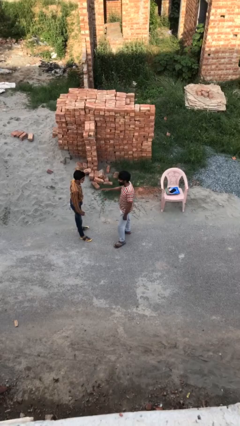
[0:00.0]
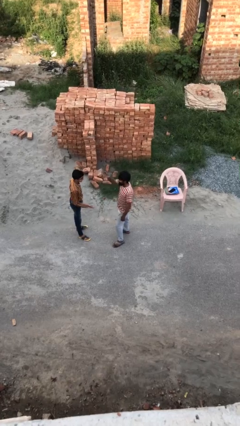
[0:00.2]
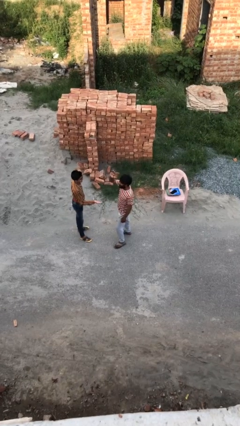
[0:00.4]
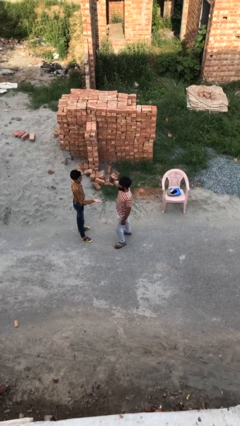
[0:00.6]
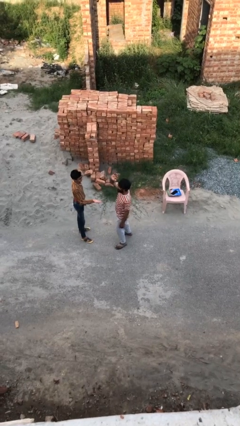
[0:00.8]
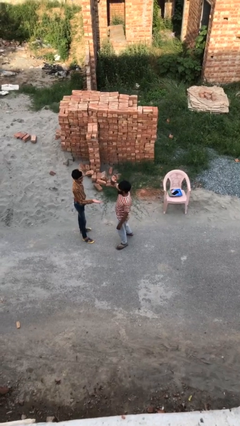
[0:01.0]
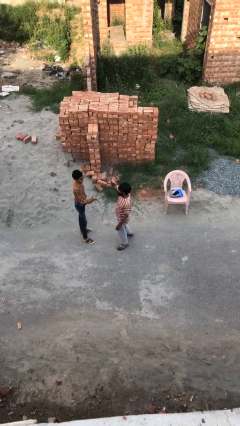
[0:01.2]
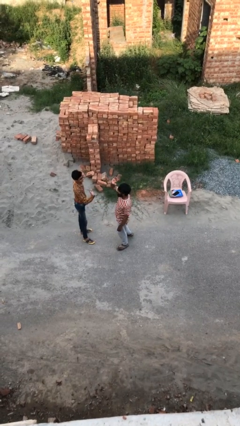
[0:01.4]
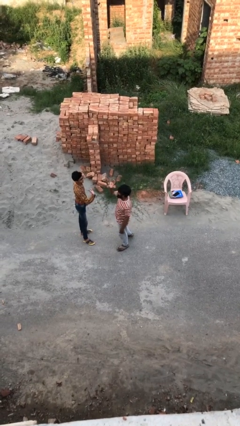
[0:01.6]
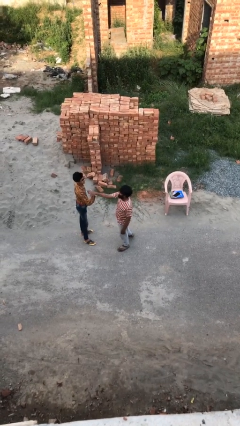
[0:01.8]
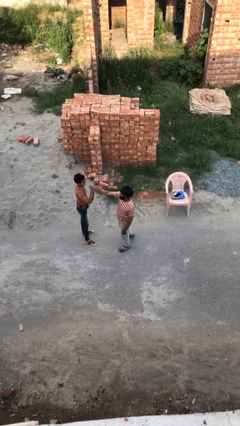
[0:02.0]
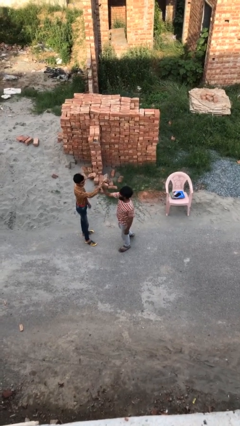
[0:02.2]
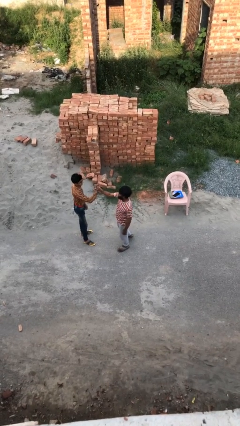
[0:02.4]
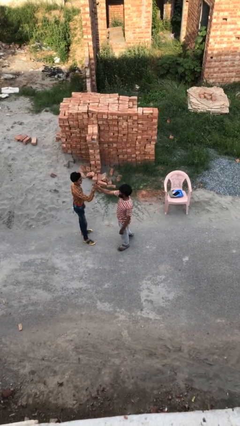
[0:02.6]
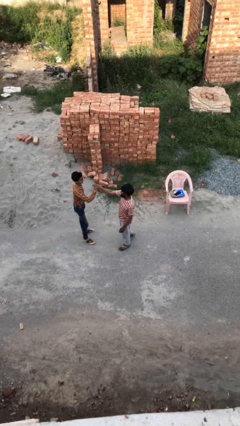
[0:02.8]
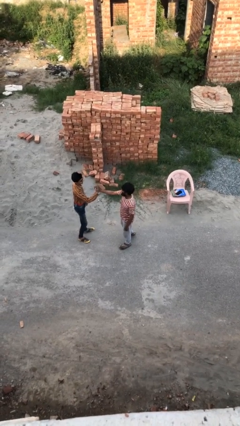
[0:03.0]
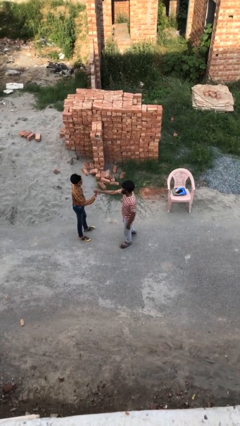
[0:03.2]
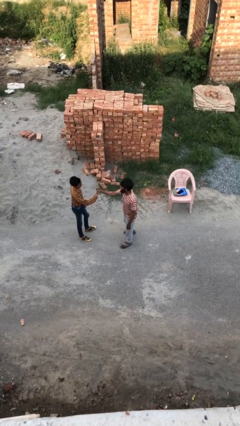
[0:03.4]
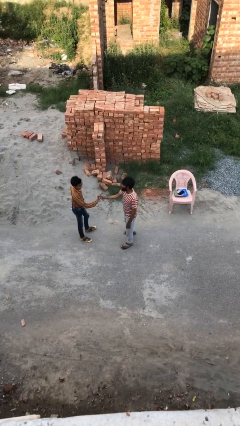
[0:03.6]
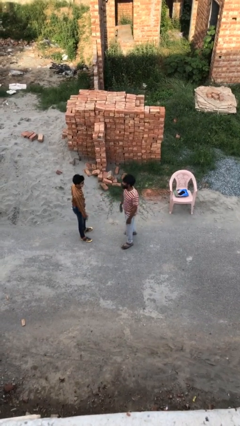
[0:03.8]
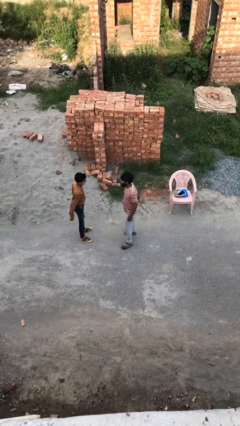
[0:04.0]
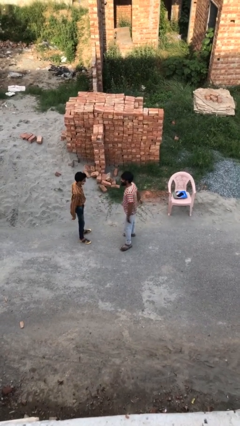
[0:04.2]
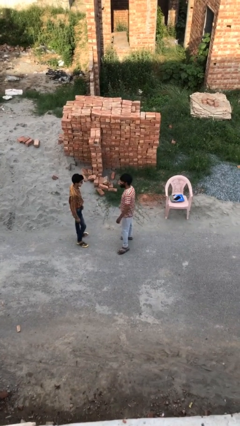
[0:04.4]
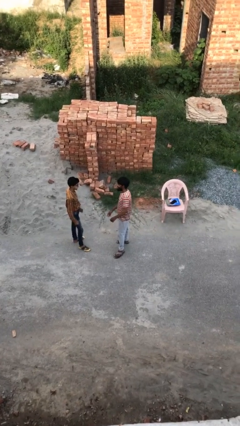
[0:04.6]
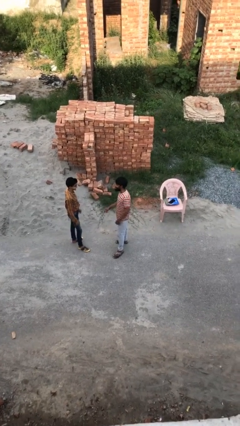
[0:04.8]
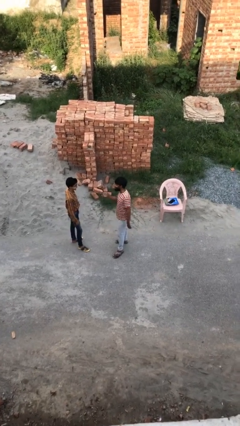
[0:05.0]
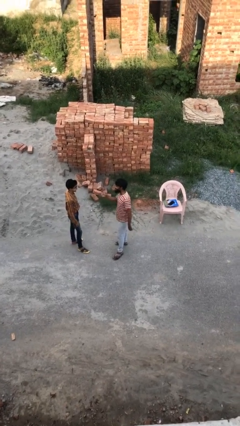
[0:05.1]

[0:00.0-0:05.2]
person highfives hand

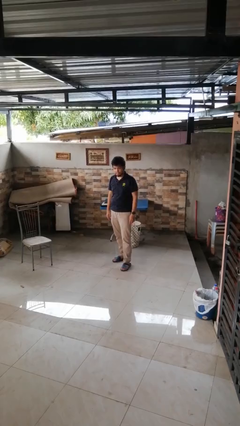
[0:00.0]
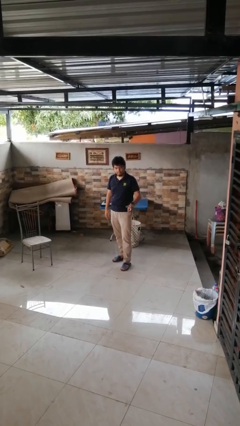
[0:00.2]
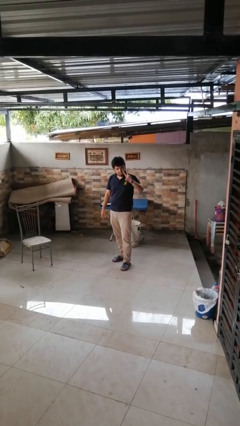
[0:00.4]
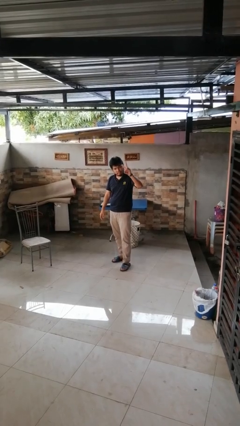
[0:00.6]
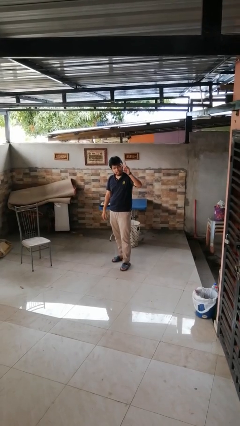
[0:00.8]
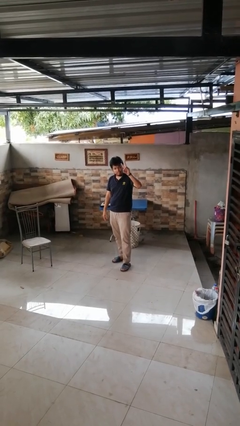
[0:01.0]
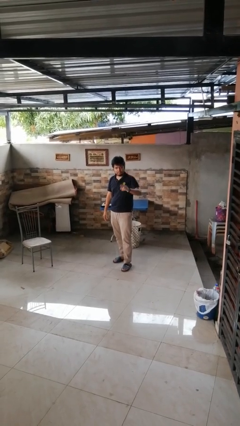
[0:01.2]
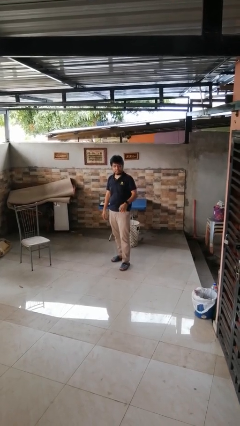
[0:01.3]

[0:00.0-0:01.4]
person gestures peace

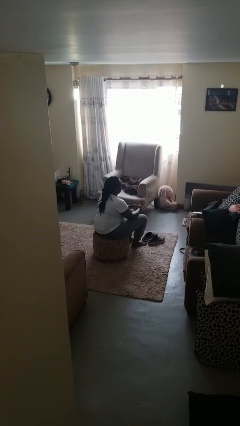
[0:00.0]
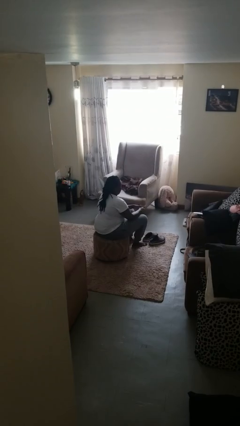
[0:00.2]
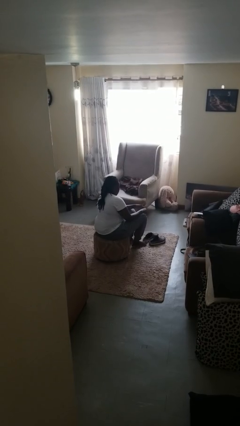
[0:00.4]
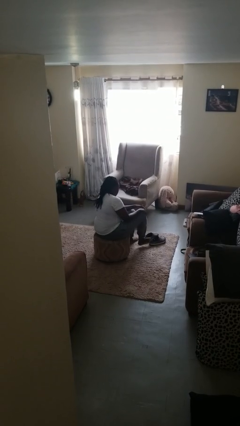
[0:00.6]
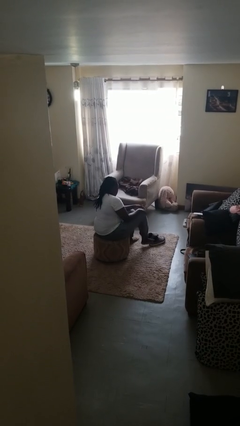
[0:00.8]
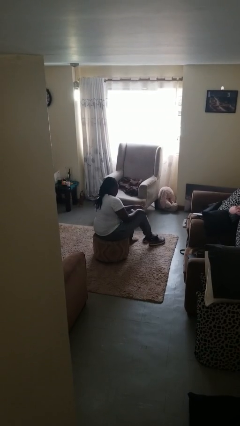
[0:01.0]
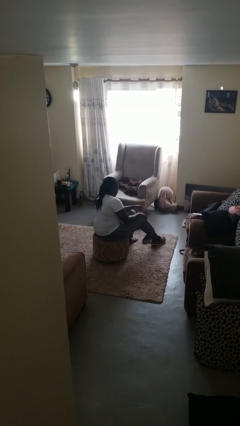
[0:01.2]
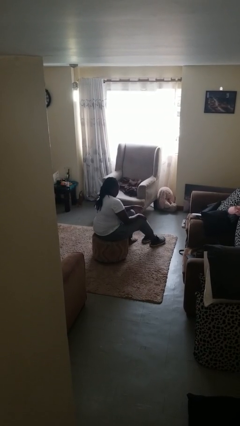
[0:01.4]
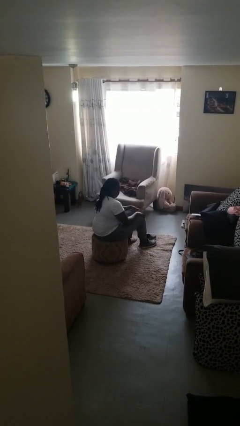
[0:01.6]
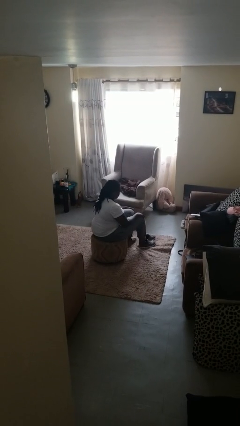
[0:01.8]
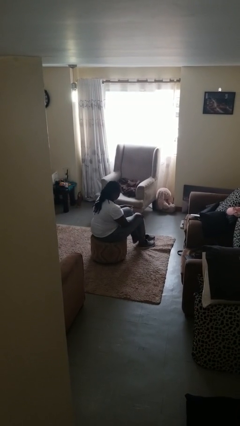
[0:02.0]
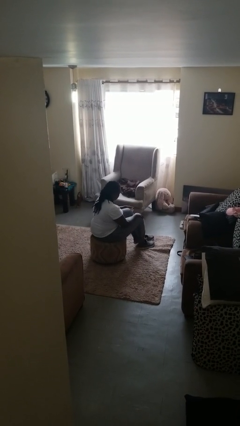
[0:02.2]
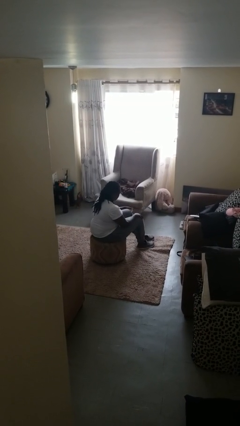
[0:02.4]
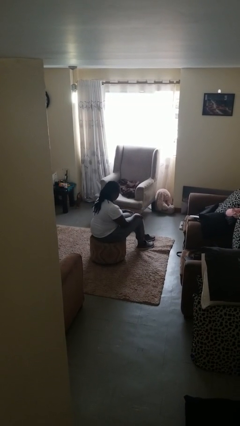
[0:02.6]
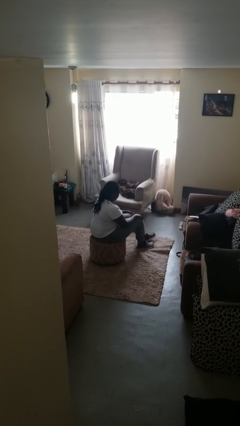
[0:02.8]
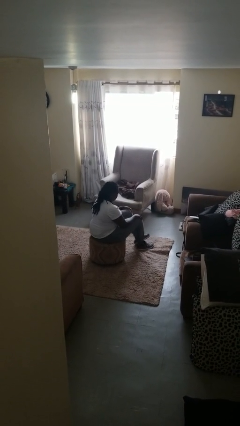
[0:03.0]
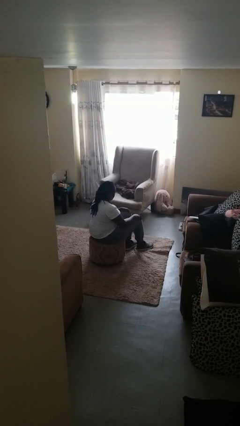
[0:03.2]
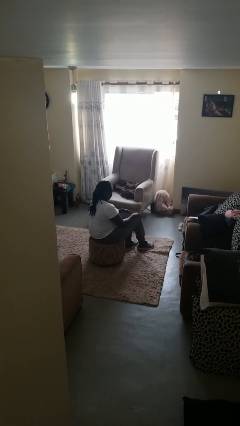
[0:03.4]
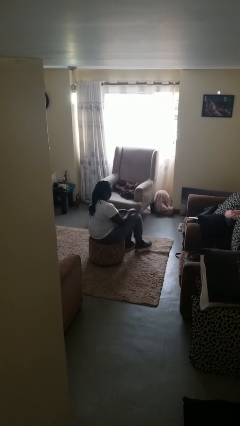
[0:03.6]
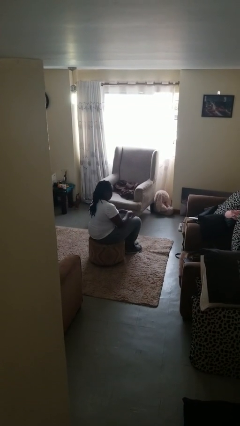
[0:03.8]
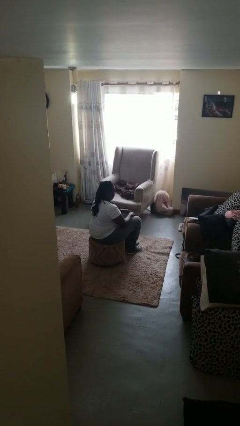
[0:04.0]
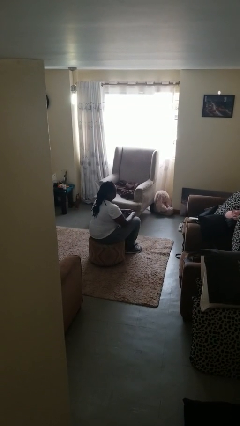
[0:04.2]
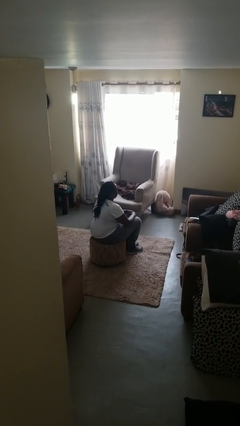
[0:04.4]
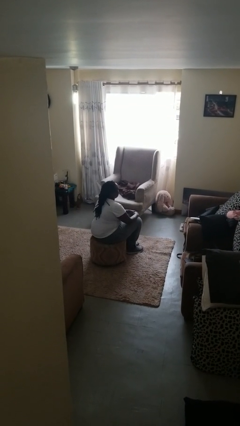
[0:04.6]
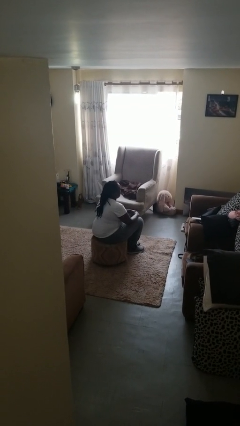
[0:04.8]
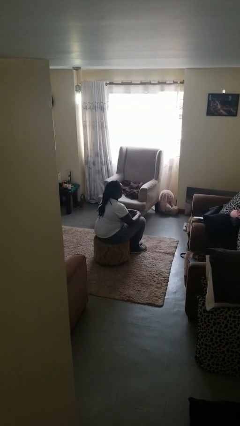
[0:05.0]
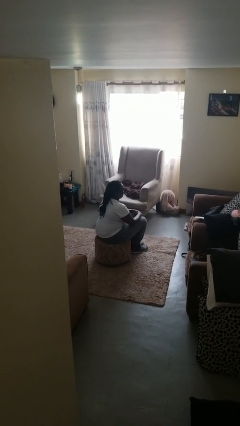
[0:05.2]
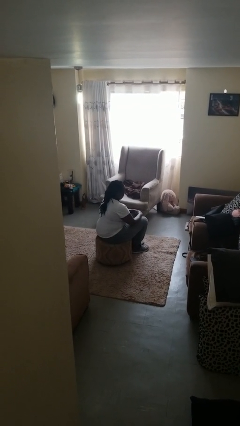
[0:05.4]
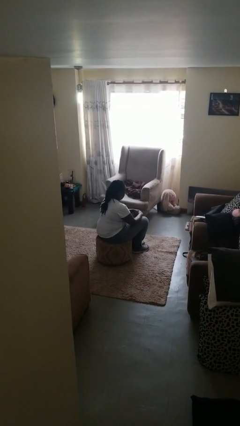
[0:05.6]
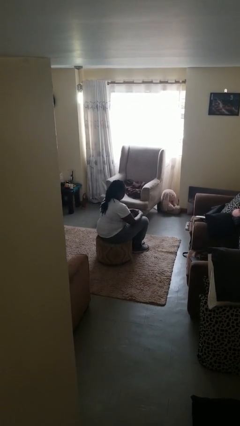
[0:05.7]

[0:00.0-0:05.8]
person puts on shoes

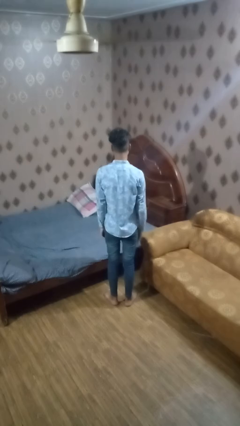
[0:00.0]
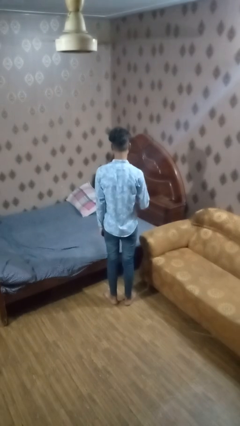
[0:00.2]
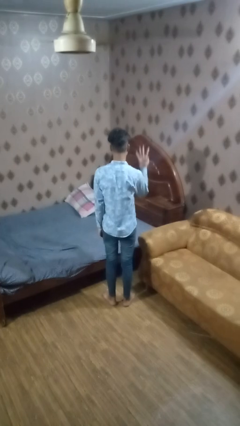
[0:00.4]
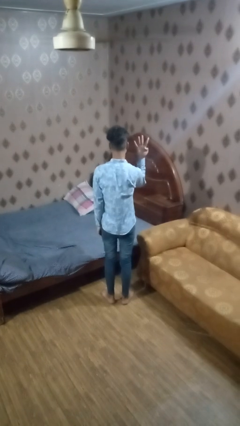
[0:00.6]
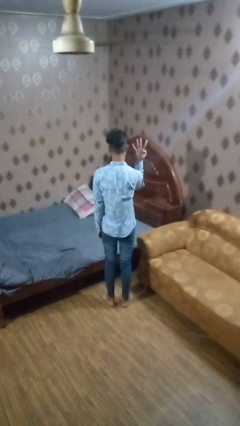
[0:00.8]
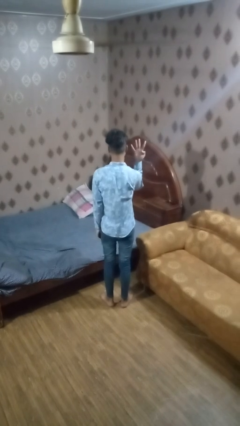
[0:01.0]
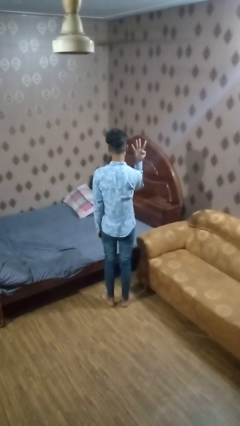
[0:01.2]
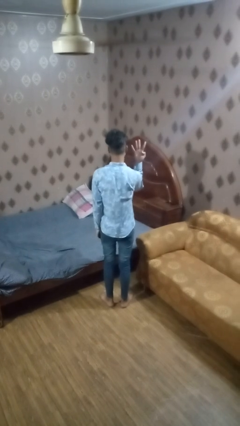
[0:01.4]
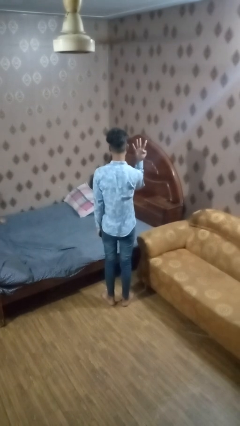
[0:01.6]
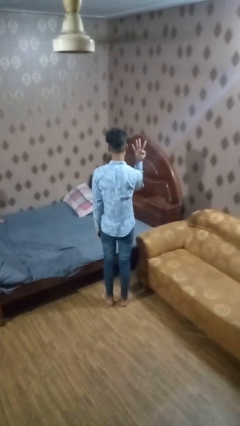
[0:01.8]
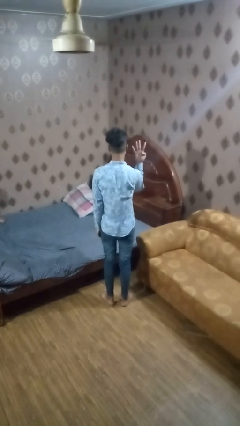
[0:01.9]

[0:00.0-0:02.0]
person gestures number four

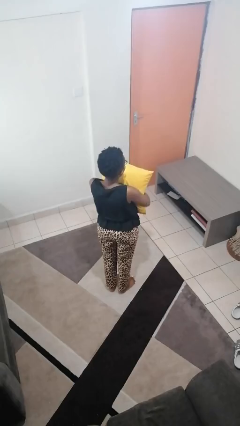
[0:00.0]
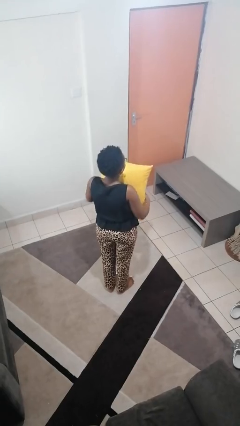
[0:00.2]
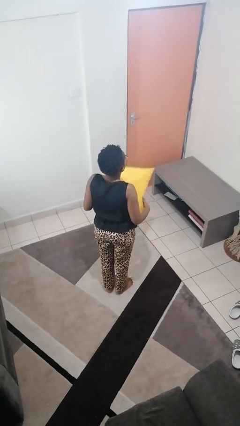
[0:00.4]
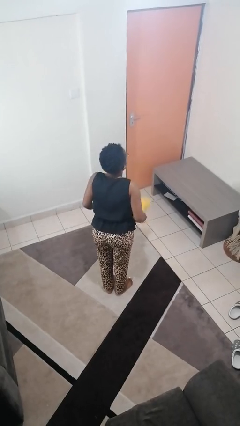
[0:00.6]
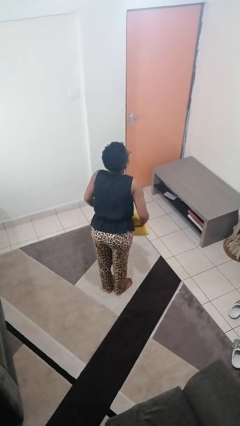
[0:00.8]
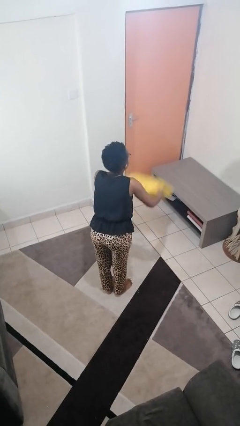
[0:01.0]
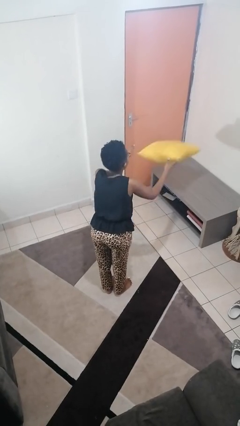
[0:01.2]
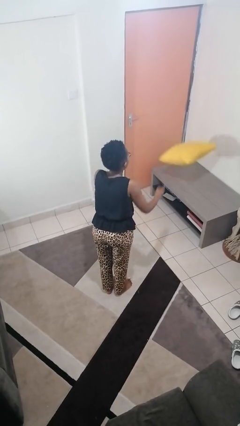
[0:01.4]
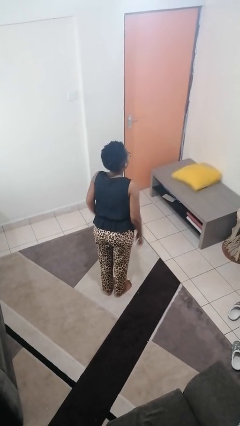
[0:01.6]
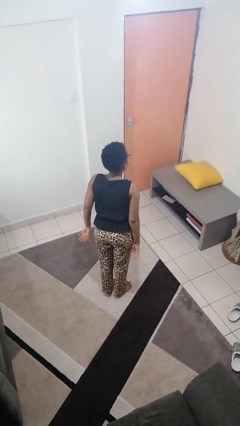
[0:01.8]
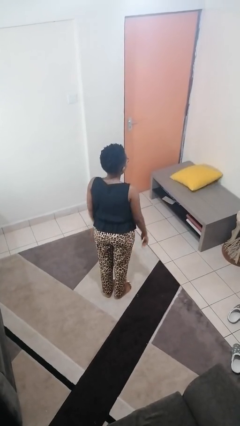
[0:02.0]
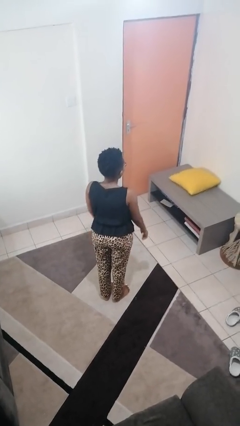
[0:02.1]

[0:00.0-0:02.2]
person throws object on table

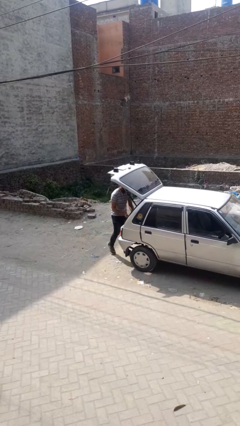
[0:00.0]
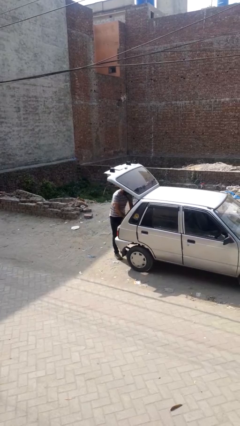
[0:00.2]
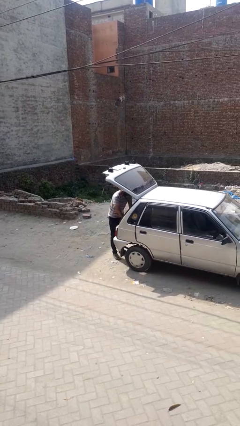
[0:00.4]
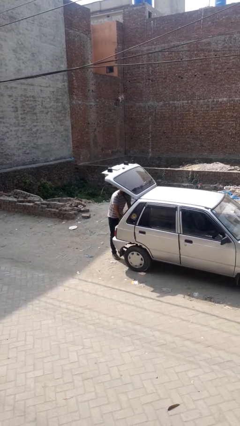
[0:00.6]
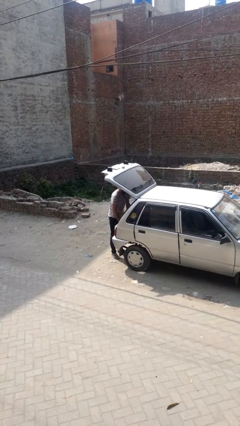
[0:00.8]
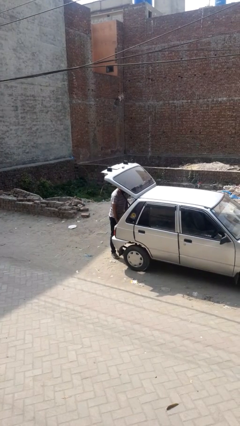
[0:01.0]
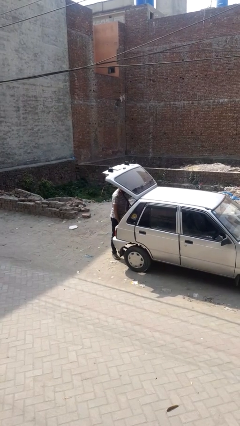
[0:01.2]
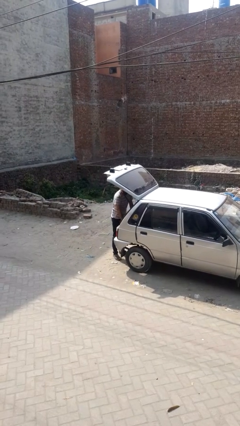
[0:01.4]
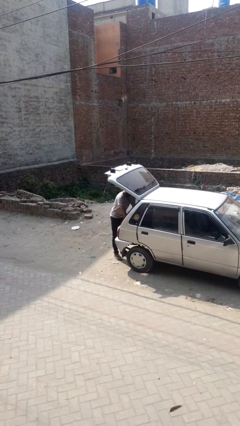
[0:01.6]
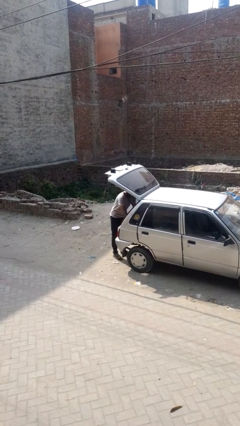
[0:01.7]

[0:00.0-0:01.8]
person loads car
